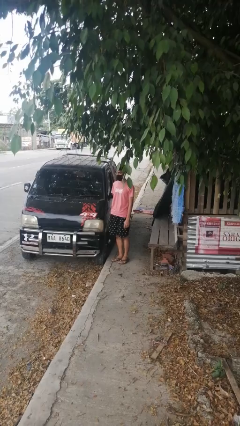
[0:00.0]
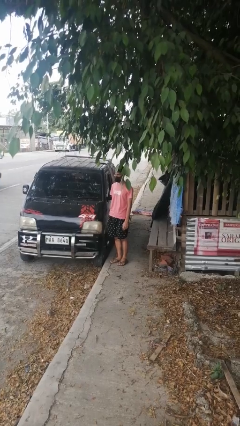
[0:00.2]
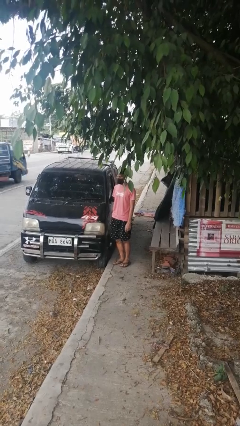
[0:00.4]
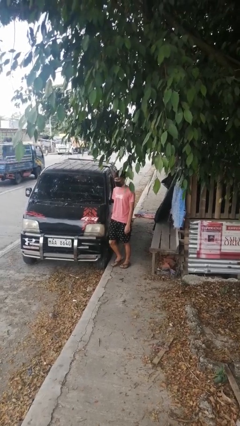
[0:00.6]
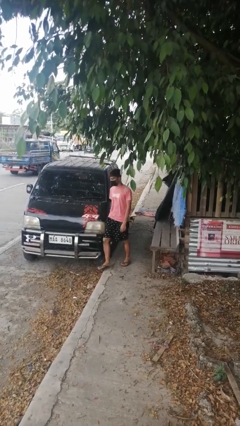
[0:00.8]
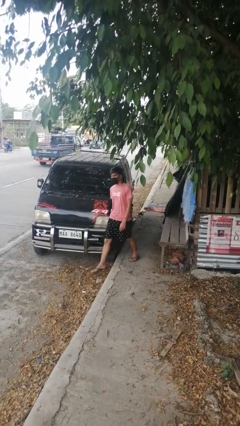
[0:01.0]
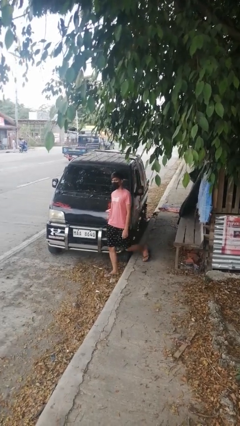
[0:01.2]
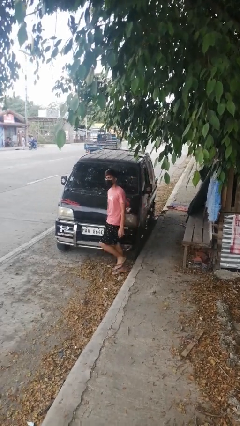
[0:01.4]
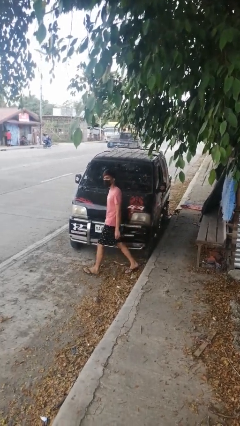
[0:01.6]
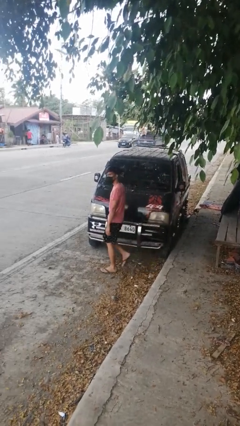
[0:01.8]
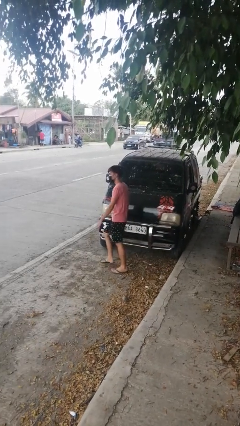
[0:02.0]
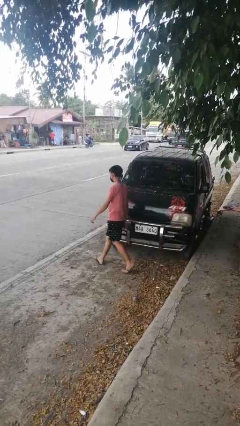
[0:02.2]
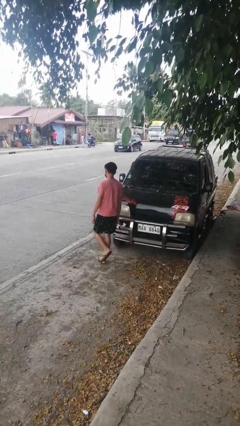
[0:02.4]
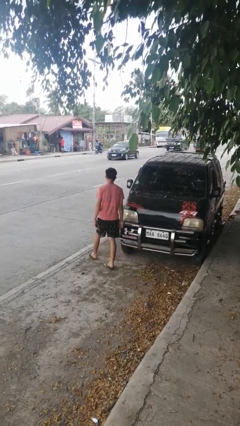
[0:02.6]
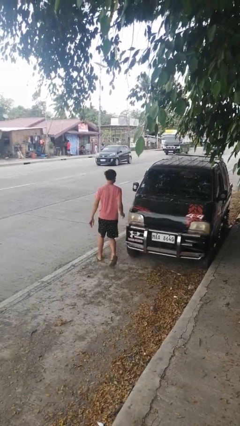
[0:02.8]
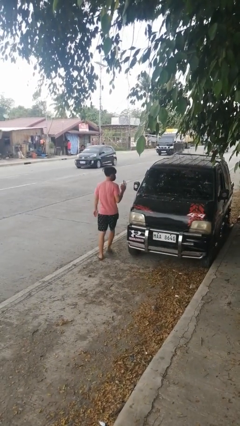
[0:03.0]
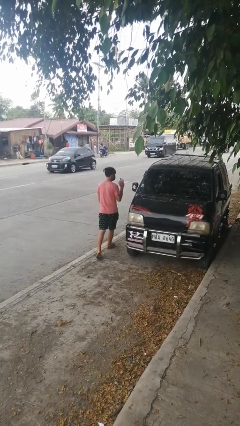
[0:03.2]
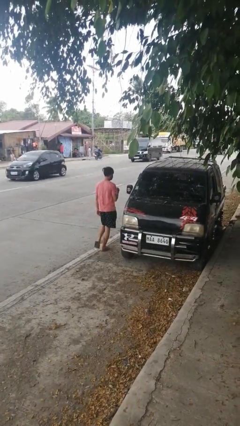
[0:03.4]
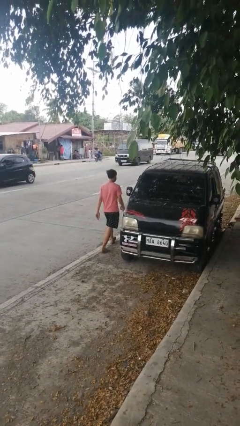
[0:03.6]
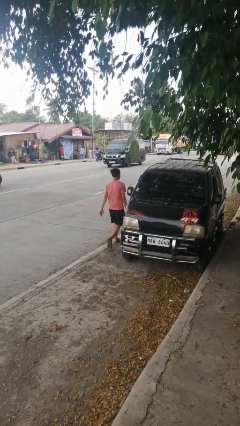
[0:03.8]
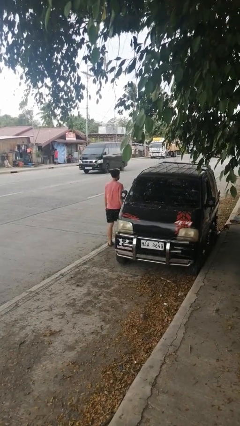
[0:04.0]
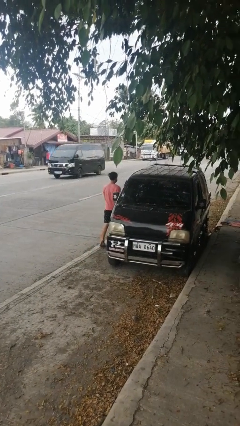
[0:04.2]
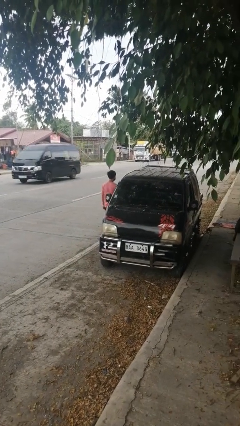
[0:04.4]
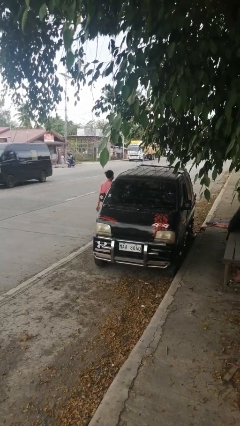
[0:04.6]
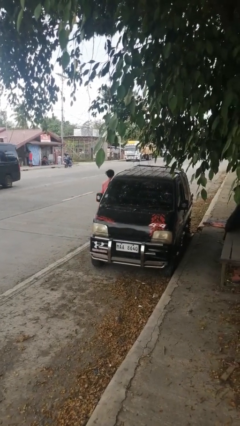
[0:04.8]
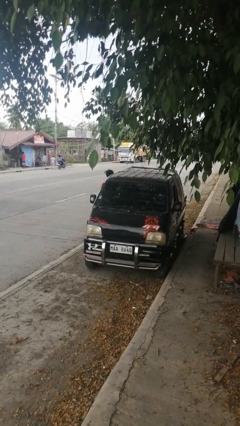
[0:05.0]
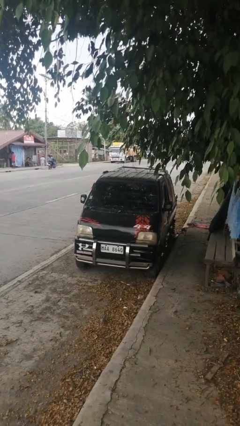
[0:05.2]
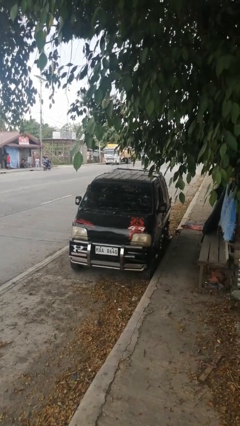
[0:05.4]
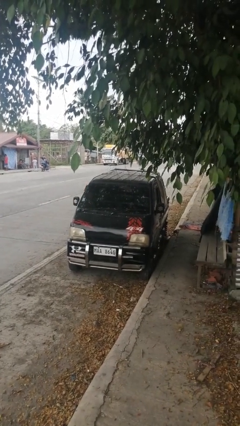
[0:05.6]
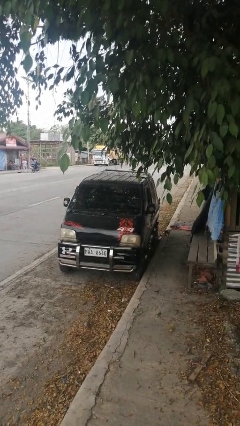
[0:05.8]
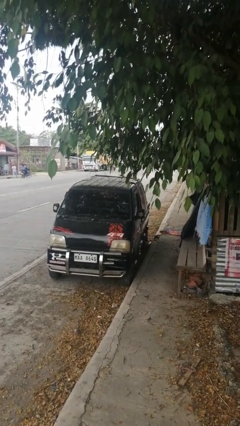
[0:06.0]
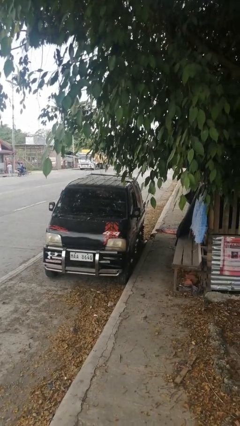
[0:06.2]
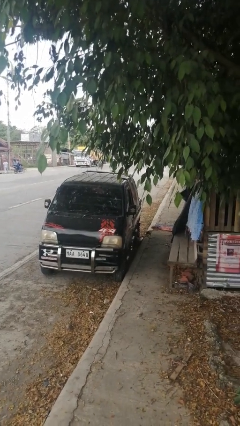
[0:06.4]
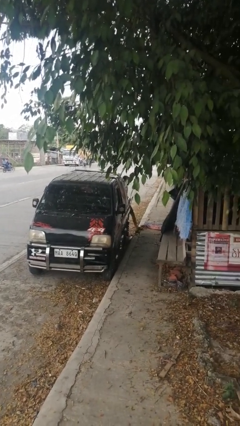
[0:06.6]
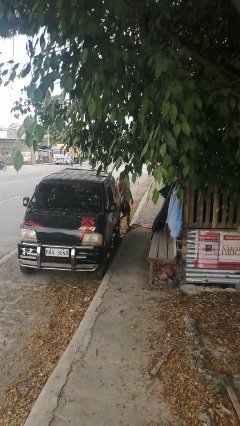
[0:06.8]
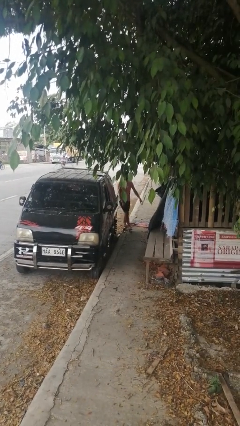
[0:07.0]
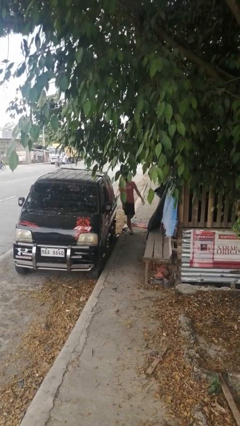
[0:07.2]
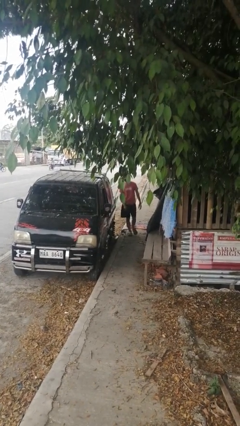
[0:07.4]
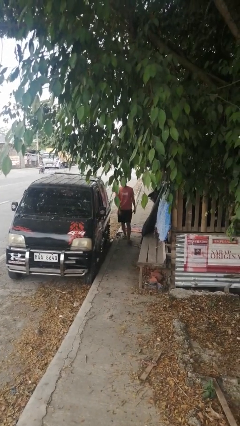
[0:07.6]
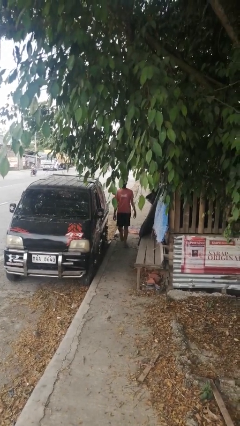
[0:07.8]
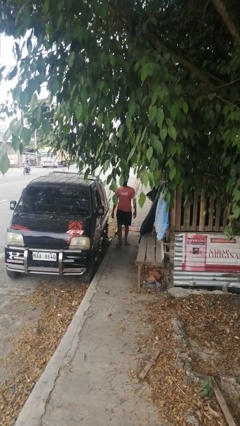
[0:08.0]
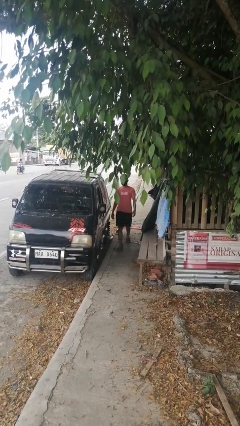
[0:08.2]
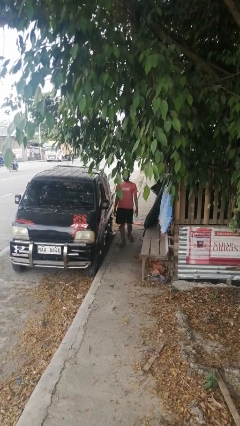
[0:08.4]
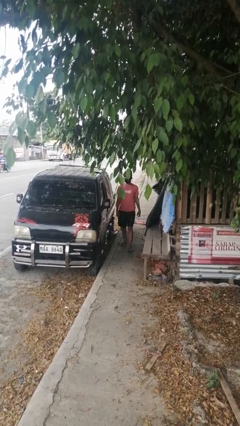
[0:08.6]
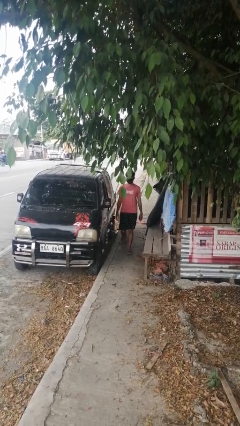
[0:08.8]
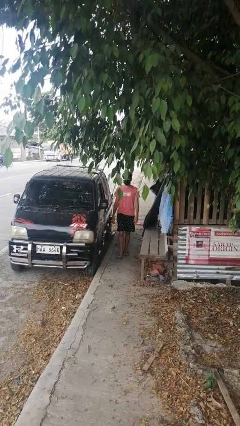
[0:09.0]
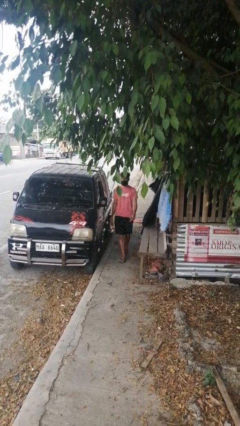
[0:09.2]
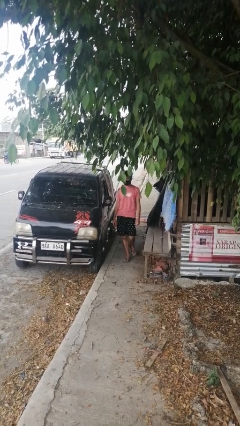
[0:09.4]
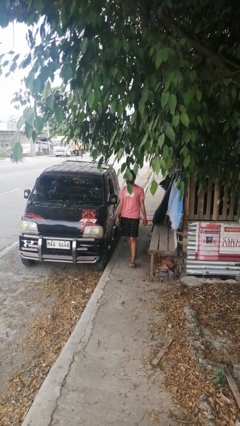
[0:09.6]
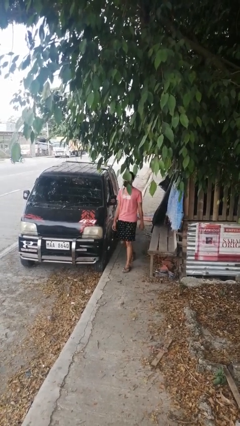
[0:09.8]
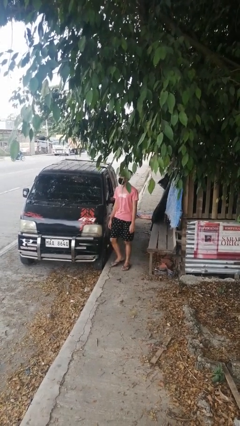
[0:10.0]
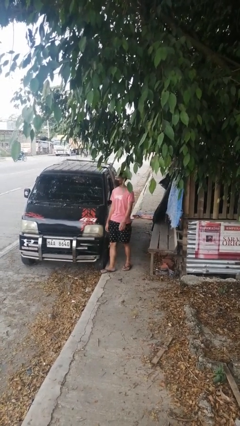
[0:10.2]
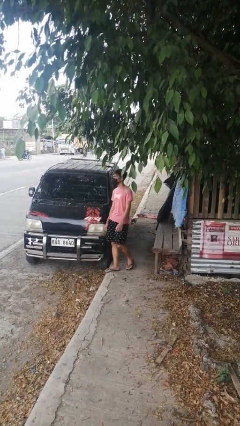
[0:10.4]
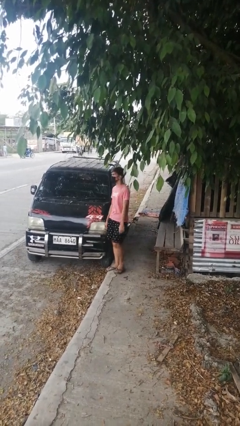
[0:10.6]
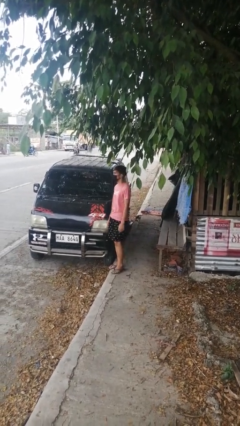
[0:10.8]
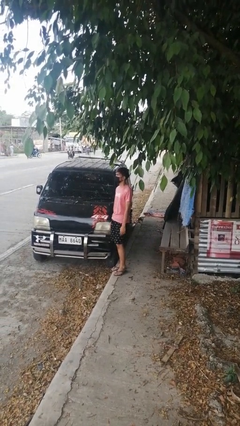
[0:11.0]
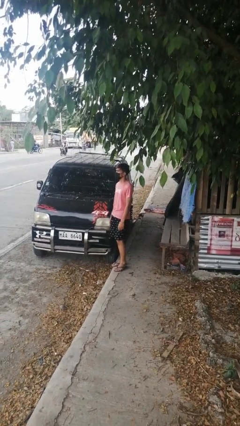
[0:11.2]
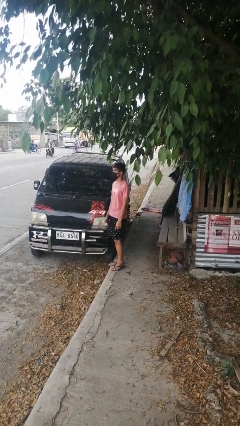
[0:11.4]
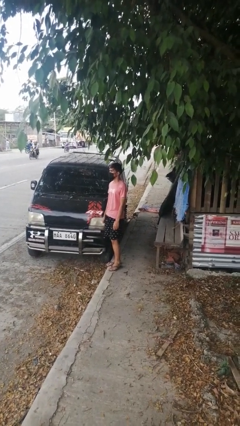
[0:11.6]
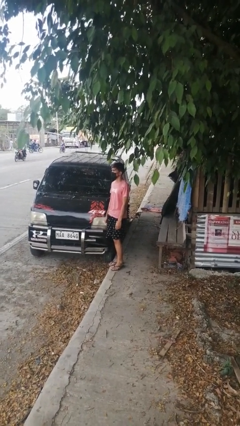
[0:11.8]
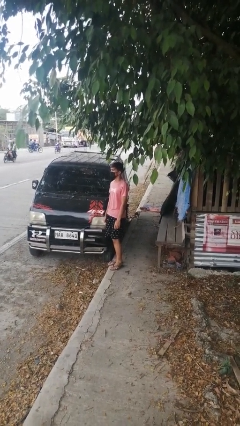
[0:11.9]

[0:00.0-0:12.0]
person walks around car

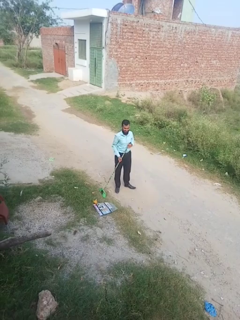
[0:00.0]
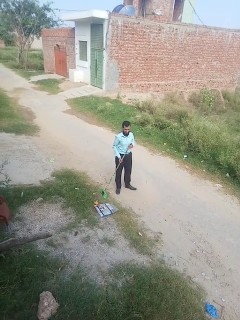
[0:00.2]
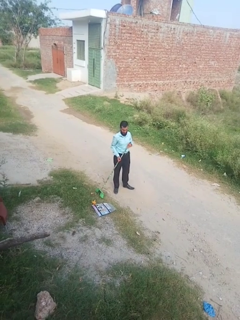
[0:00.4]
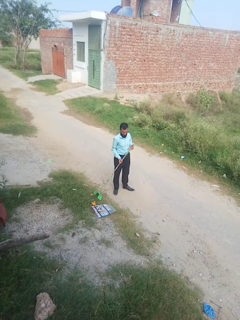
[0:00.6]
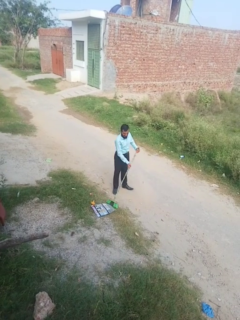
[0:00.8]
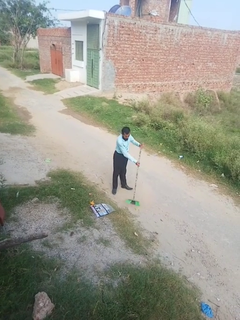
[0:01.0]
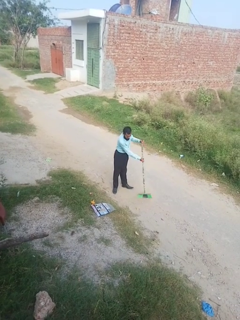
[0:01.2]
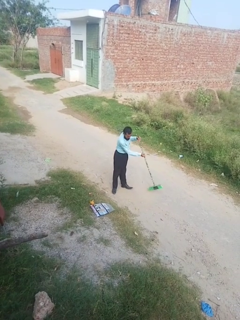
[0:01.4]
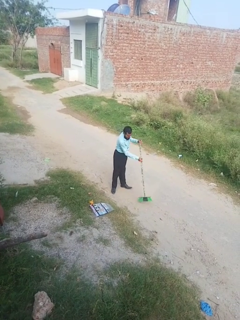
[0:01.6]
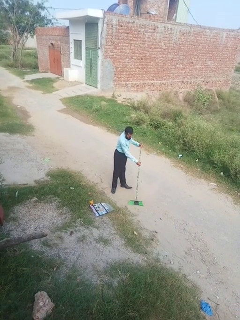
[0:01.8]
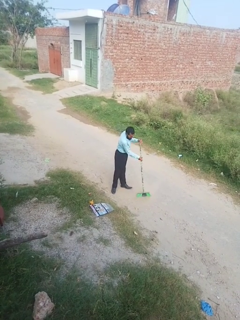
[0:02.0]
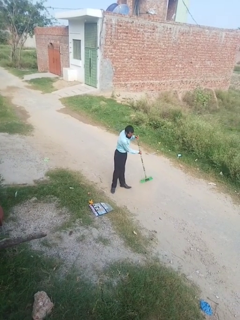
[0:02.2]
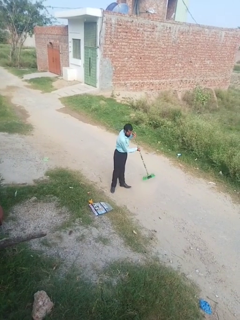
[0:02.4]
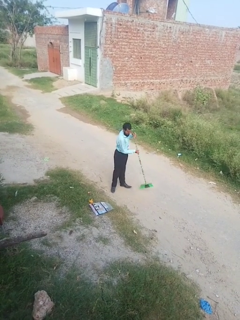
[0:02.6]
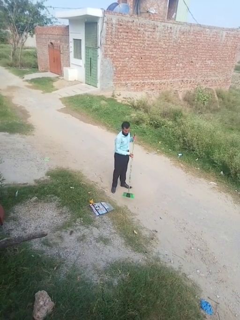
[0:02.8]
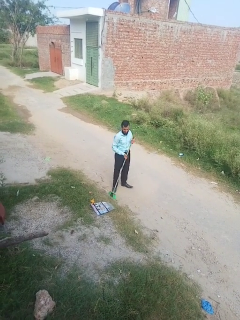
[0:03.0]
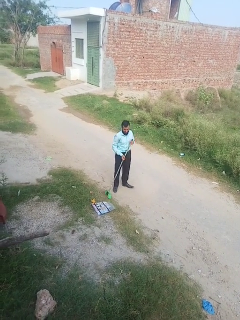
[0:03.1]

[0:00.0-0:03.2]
person sweeps floor

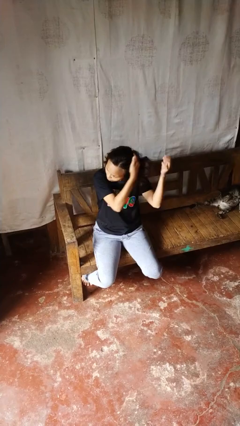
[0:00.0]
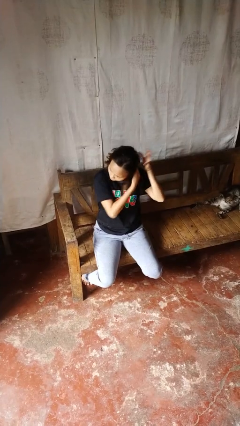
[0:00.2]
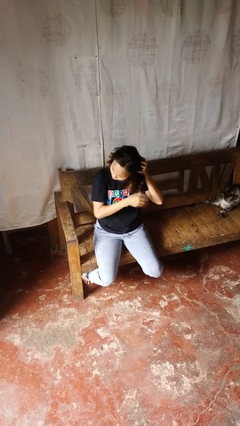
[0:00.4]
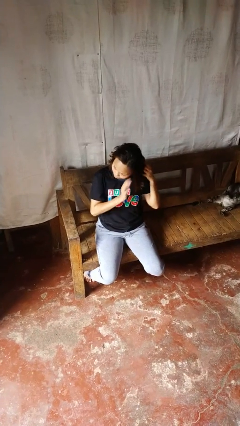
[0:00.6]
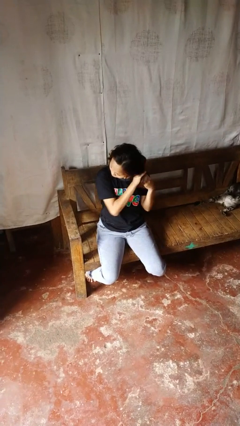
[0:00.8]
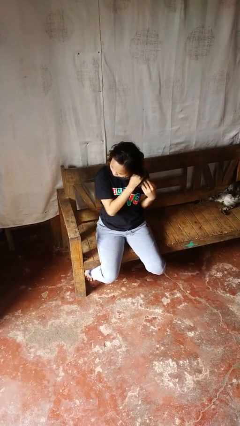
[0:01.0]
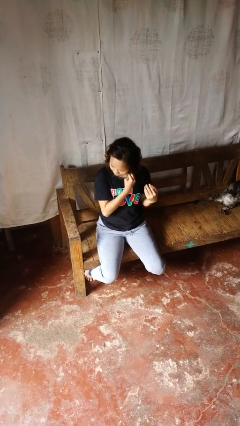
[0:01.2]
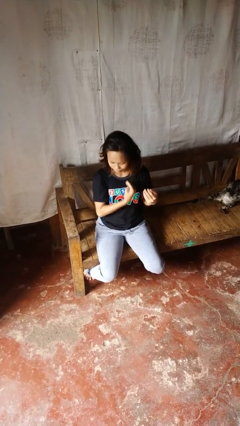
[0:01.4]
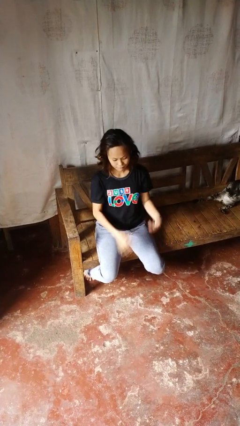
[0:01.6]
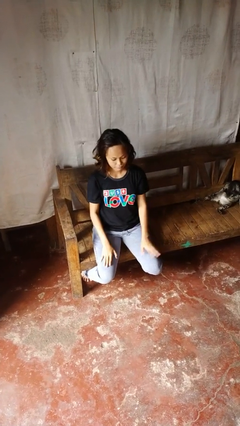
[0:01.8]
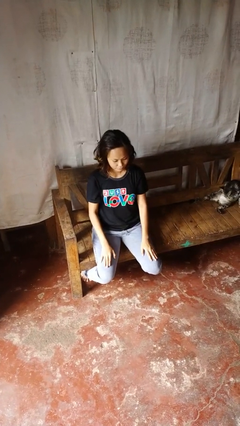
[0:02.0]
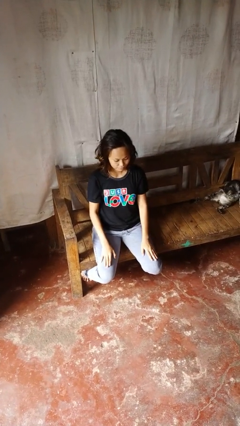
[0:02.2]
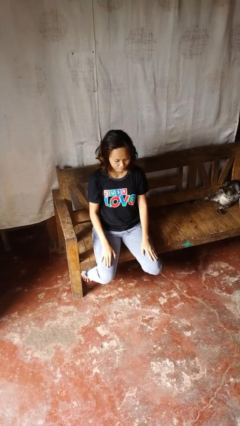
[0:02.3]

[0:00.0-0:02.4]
person strokes hair

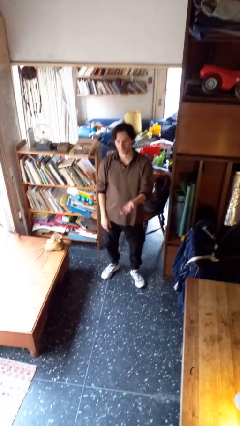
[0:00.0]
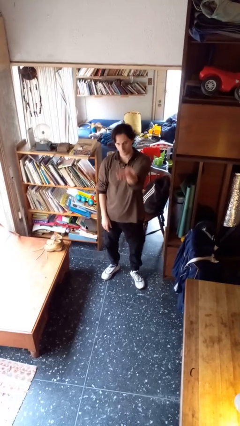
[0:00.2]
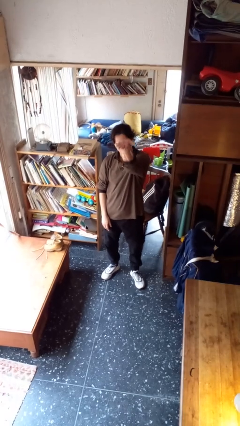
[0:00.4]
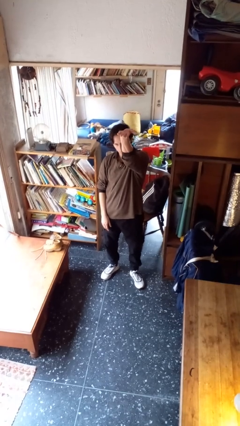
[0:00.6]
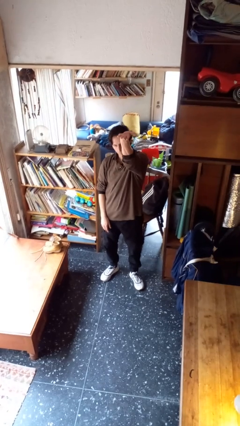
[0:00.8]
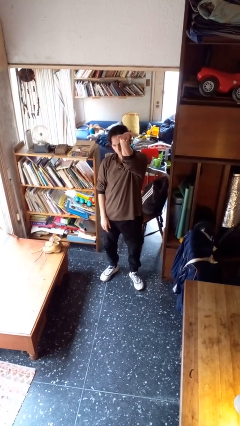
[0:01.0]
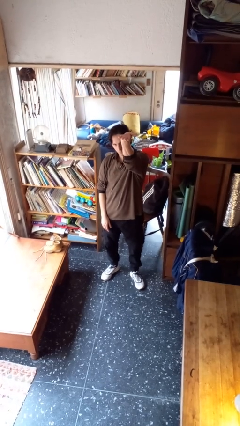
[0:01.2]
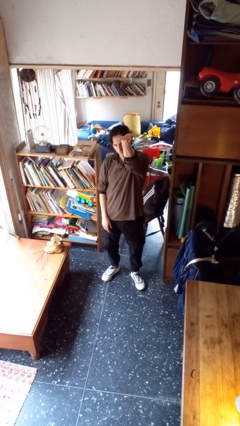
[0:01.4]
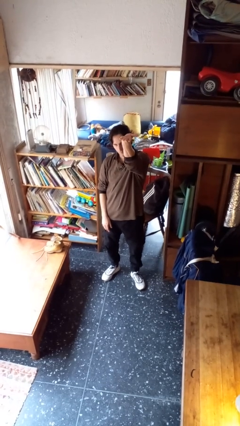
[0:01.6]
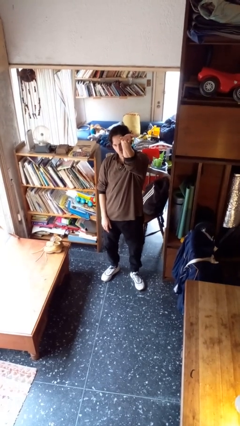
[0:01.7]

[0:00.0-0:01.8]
person gestures swipe up
